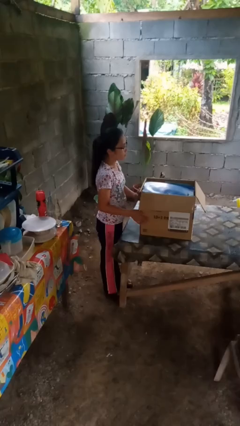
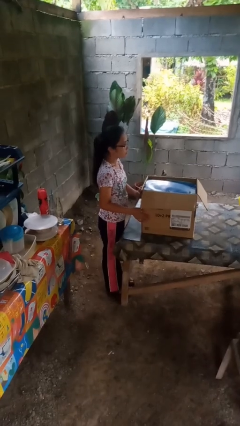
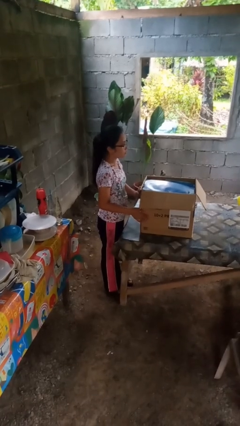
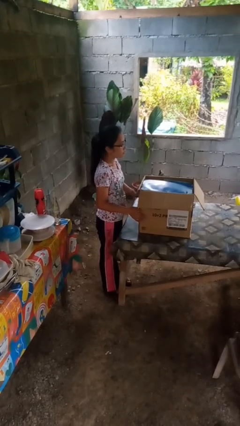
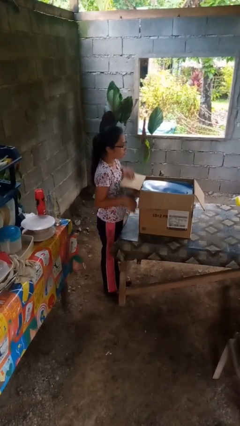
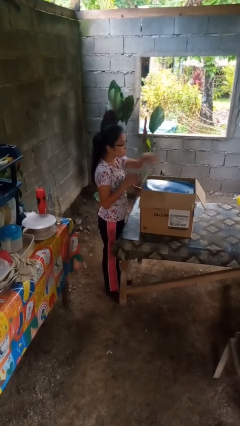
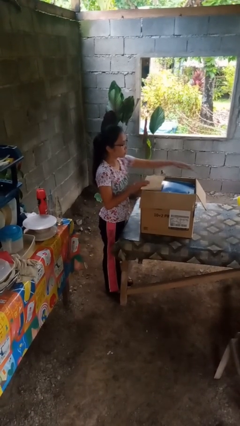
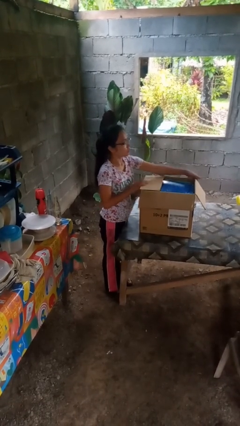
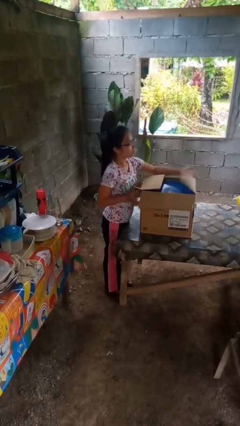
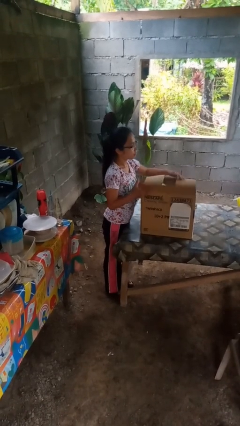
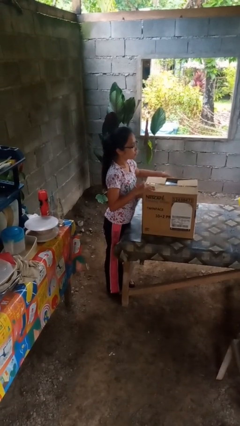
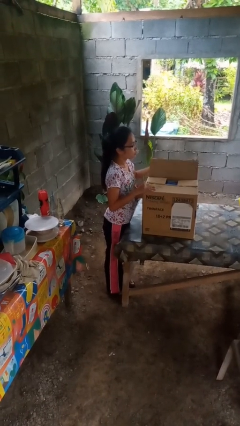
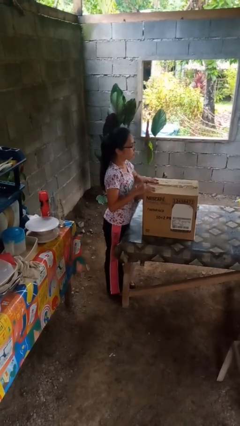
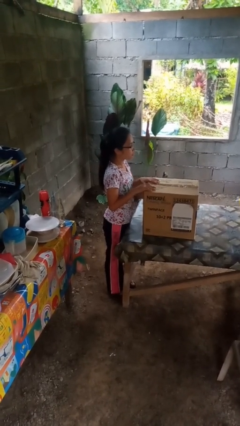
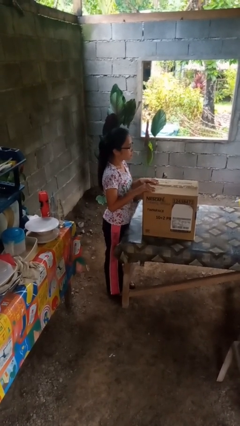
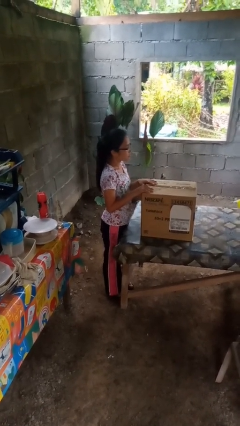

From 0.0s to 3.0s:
person closes box

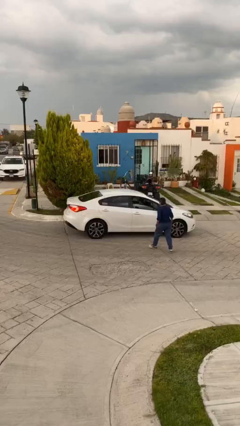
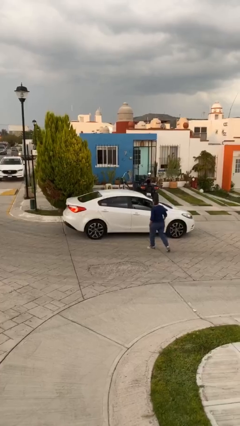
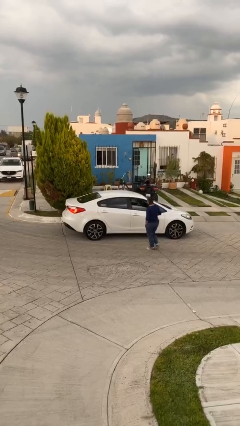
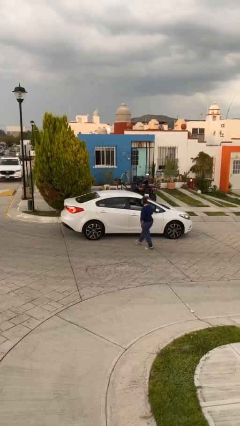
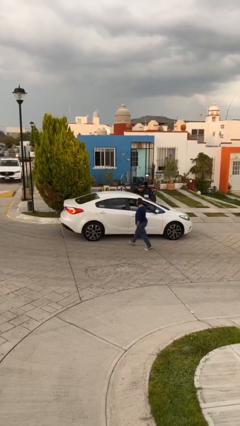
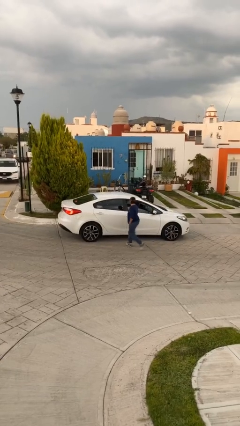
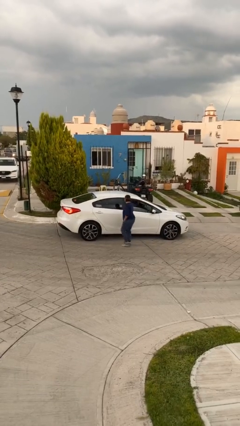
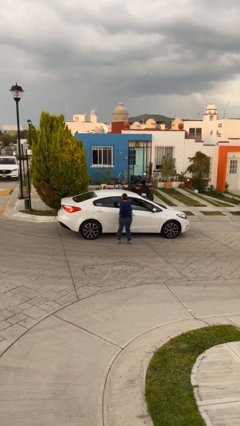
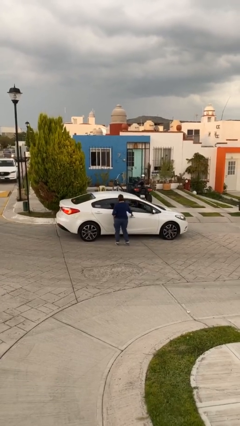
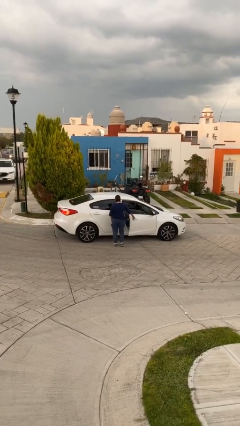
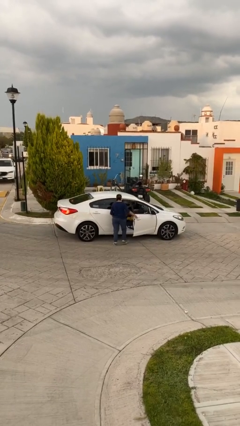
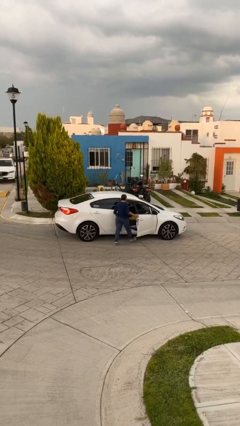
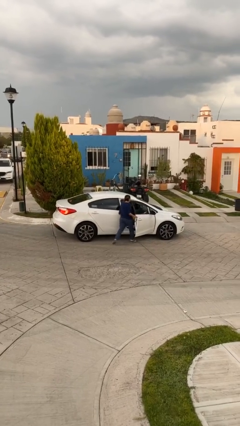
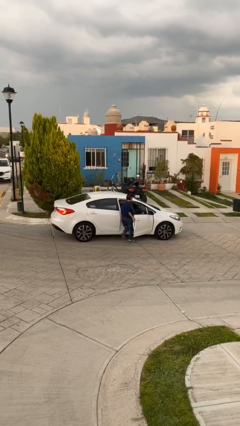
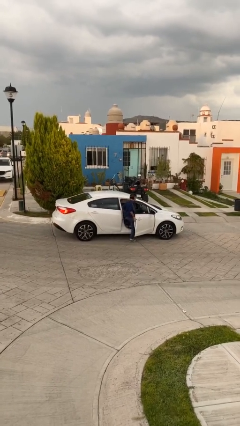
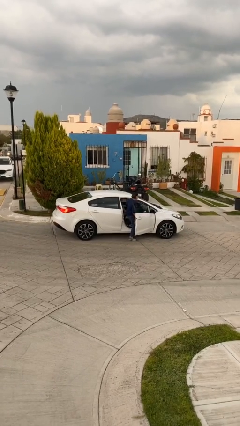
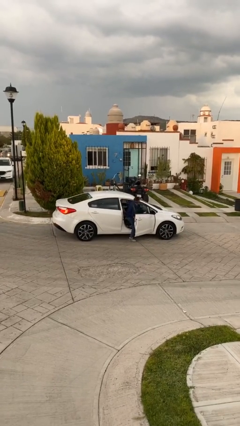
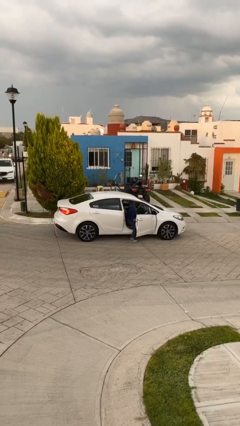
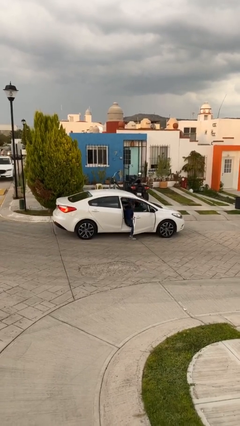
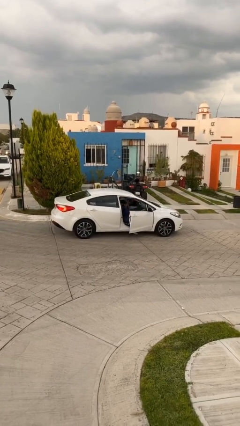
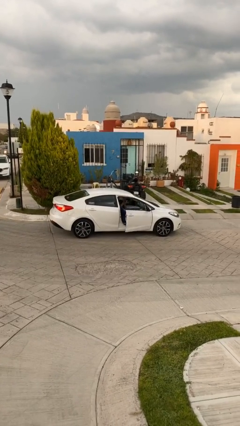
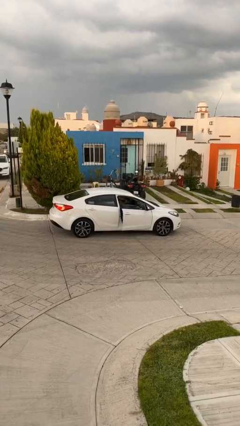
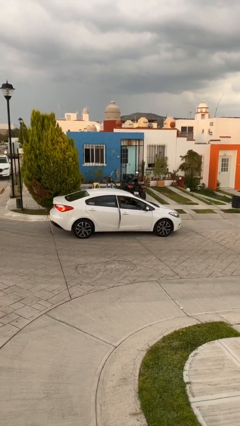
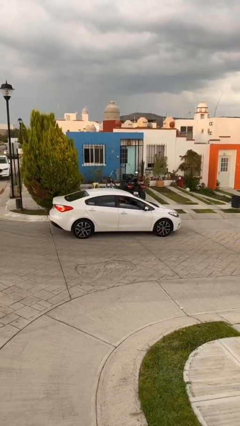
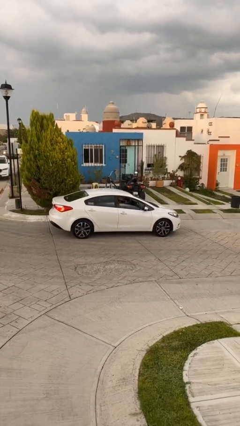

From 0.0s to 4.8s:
car picks up person

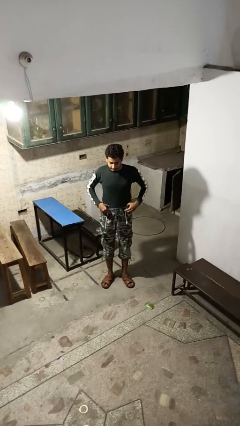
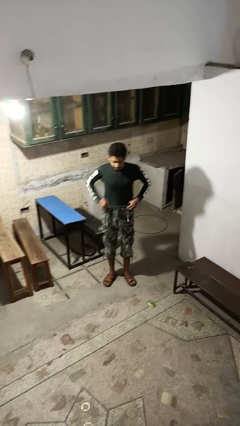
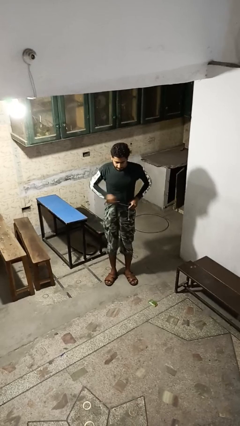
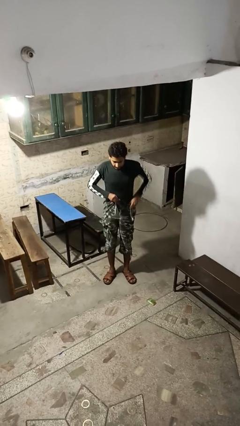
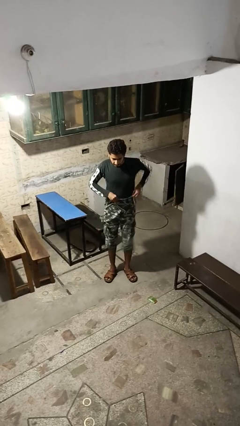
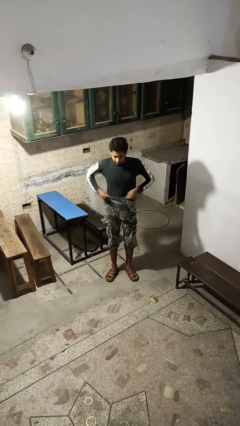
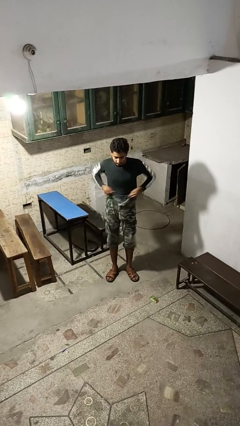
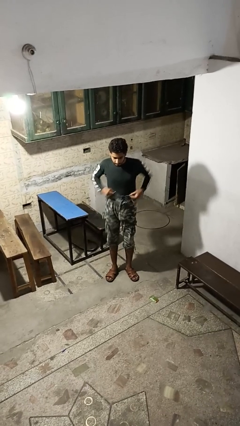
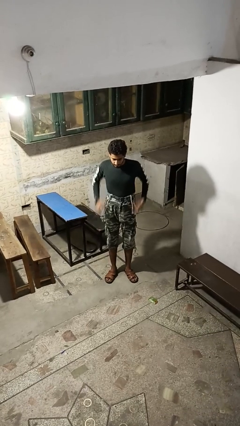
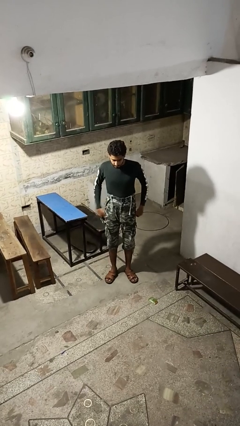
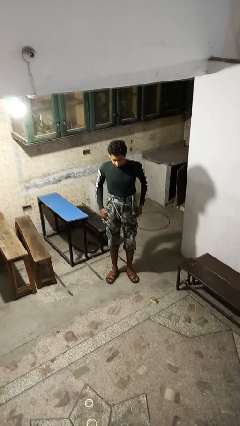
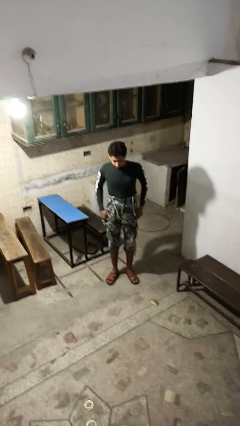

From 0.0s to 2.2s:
person hikes up pants

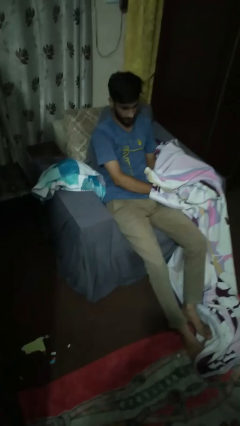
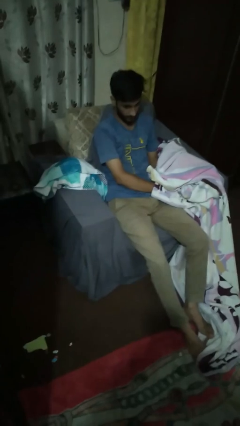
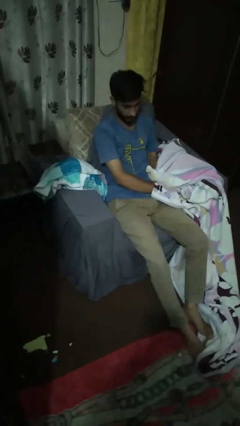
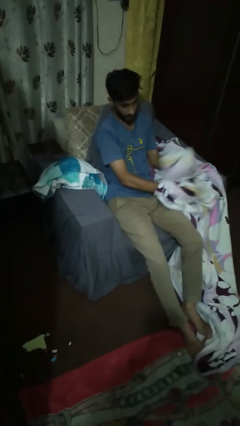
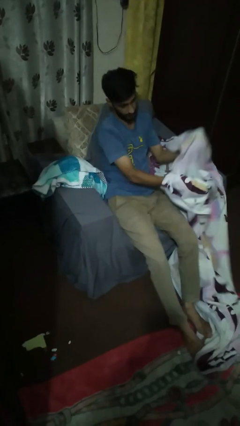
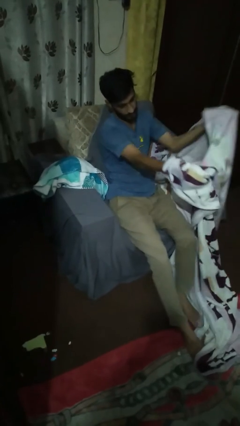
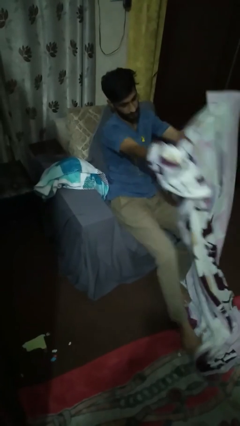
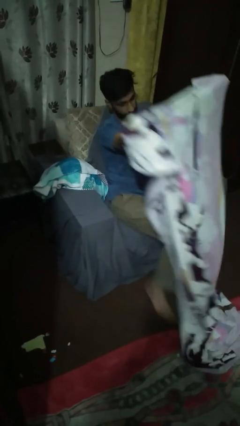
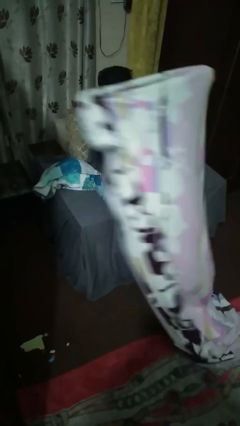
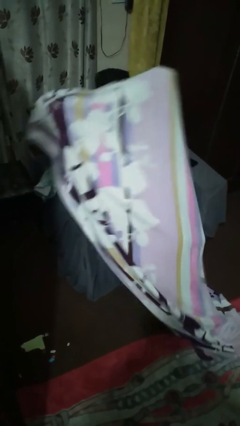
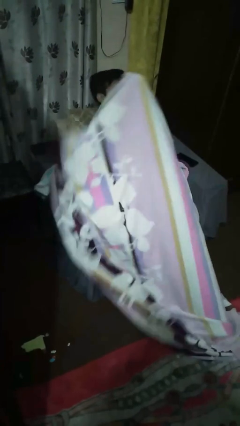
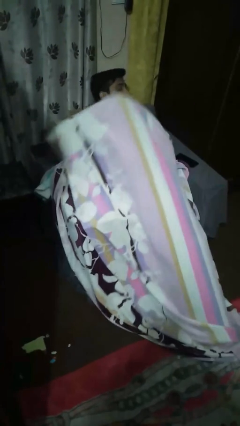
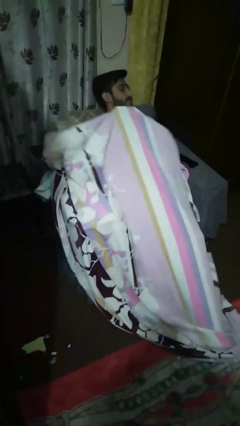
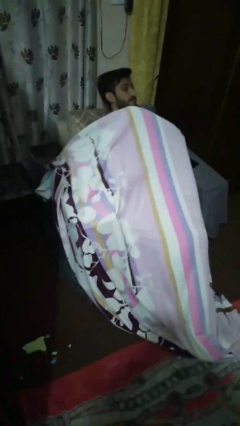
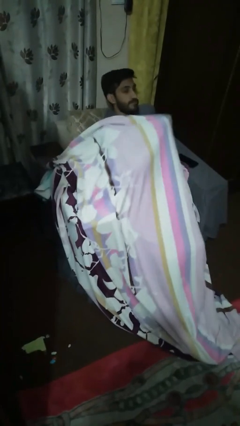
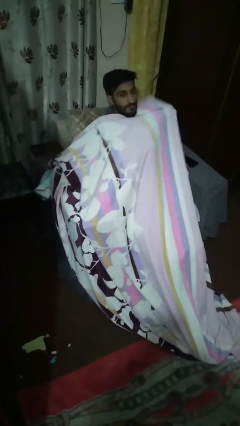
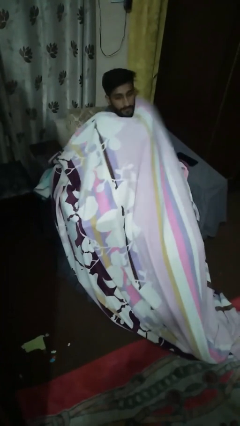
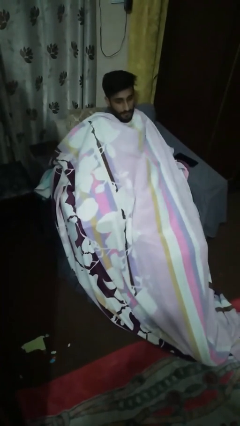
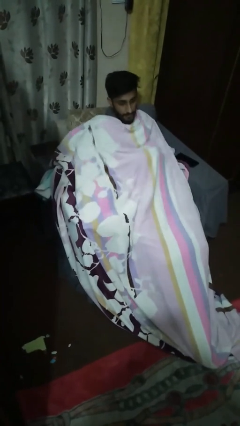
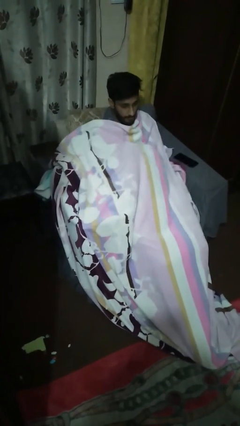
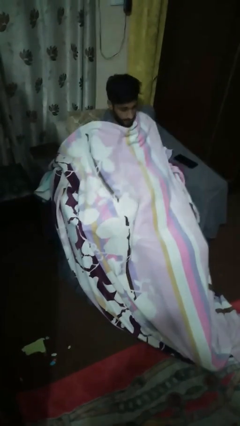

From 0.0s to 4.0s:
person covers with blanket

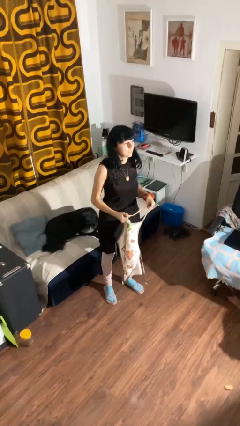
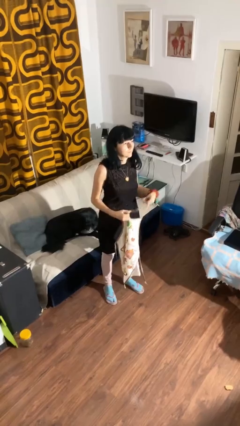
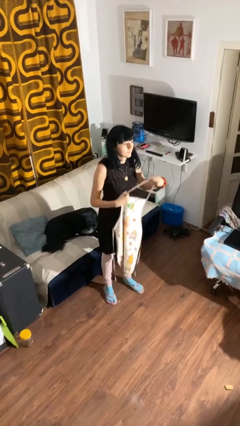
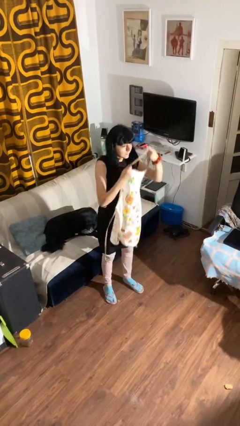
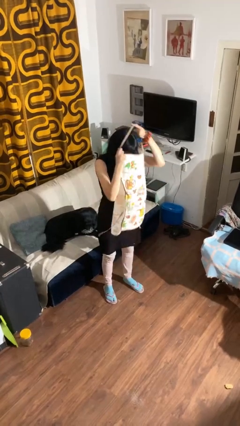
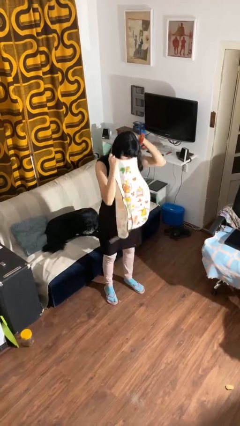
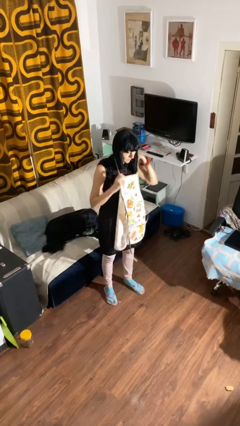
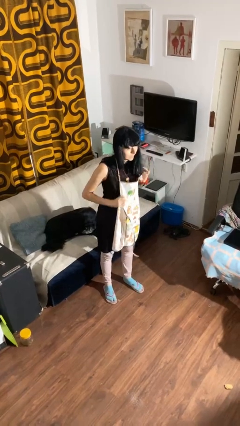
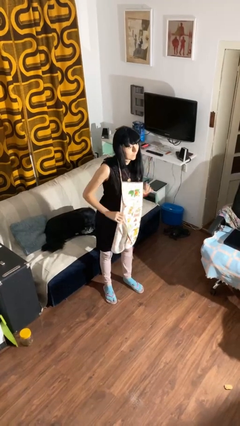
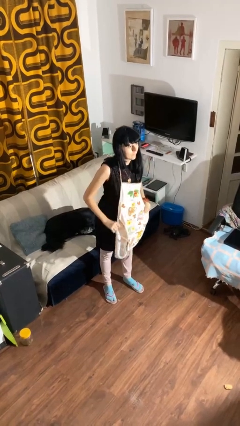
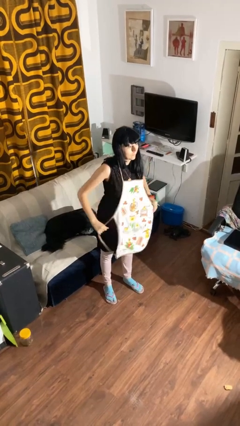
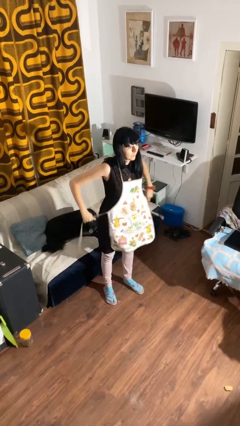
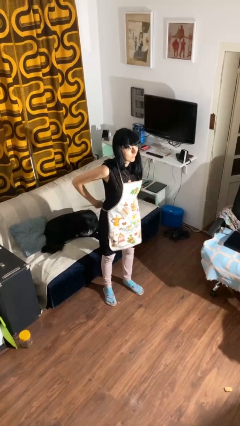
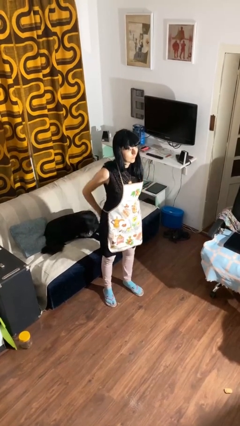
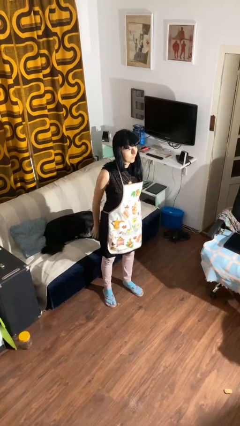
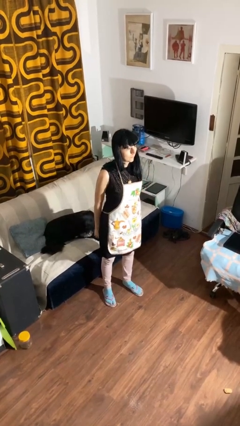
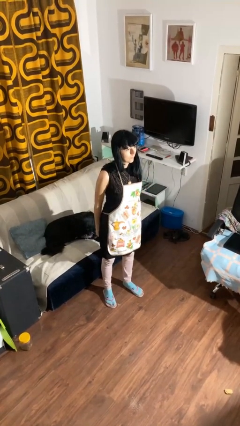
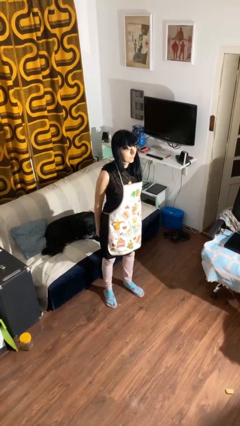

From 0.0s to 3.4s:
person puts on apron

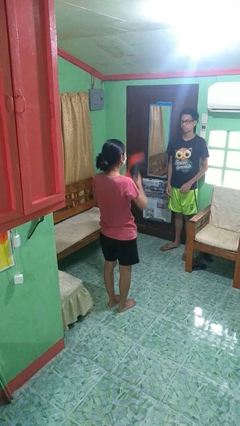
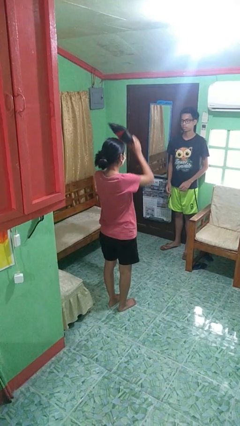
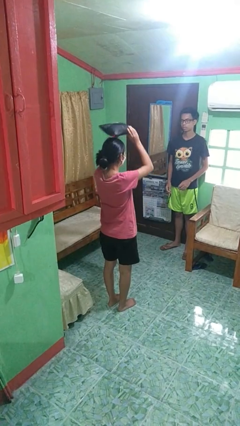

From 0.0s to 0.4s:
person throws object to person
